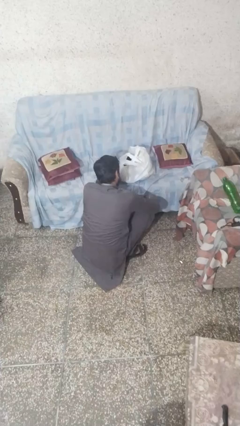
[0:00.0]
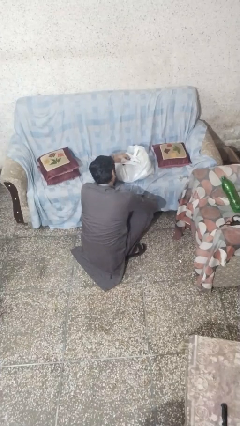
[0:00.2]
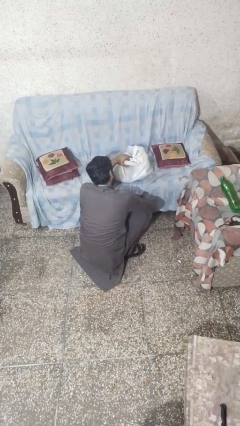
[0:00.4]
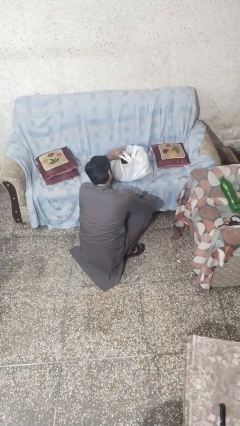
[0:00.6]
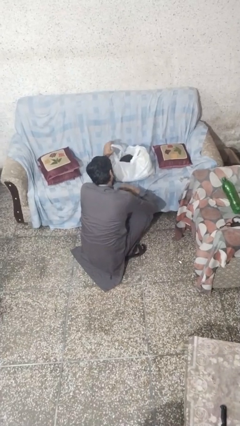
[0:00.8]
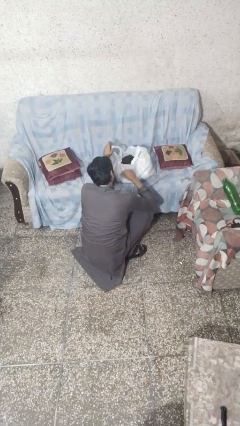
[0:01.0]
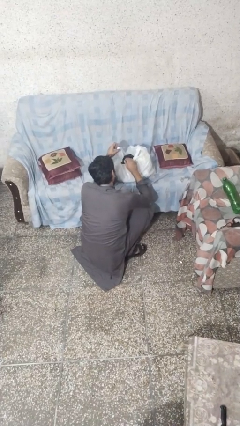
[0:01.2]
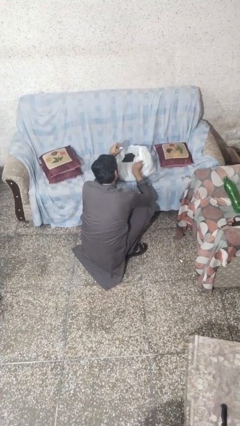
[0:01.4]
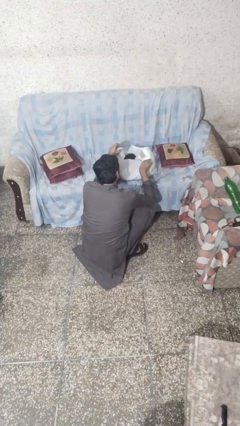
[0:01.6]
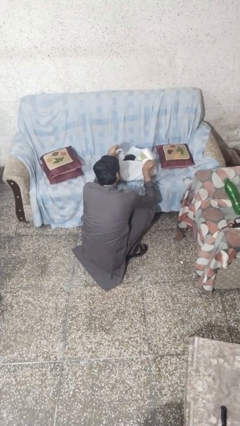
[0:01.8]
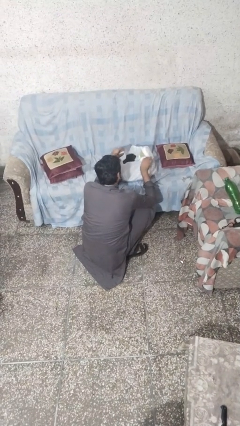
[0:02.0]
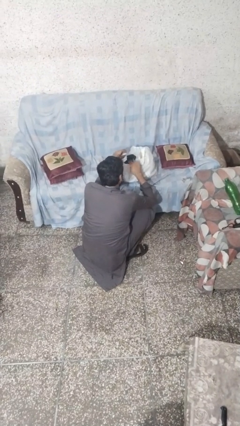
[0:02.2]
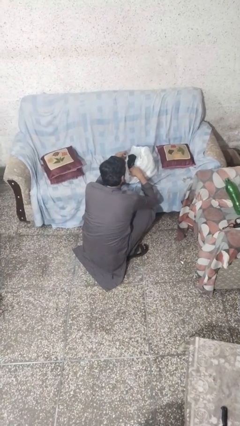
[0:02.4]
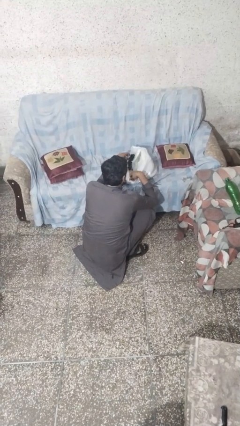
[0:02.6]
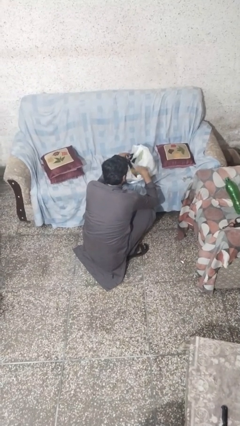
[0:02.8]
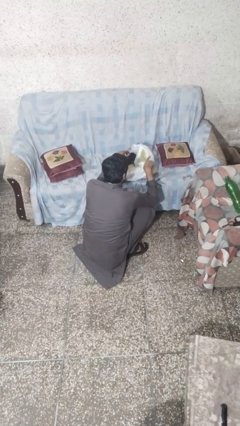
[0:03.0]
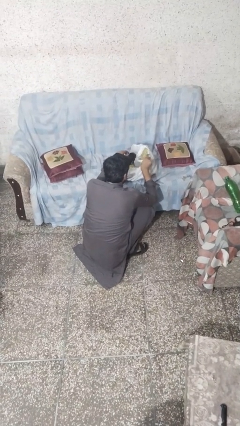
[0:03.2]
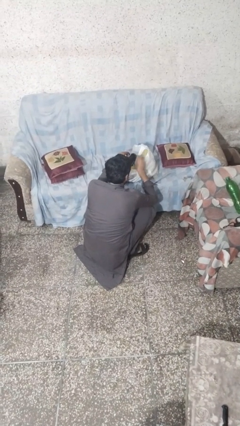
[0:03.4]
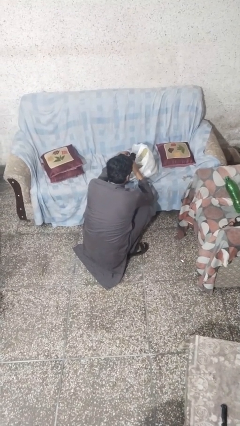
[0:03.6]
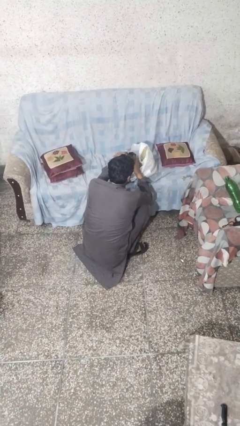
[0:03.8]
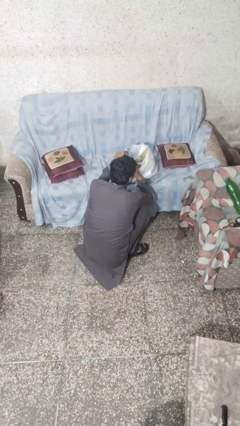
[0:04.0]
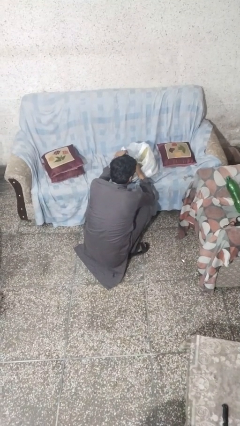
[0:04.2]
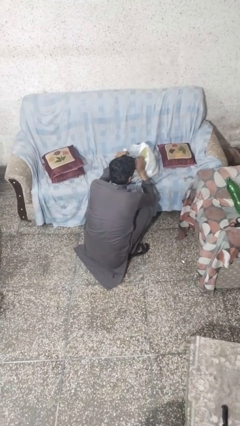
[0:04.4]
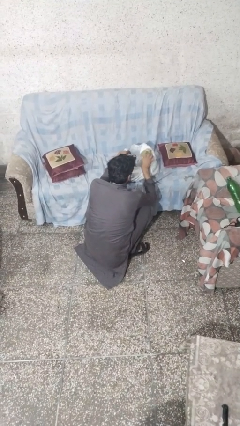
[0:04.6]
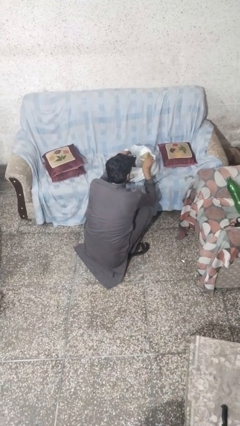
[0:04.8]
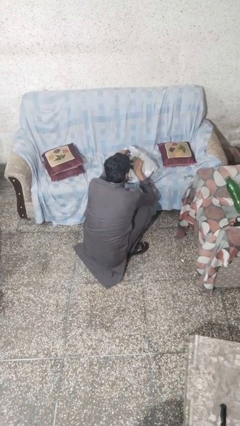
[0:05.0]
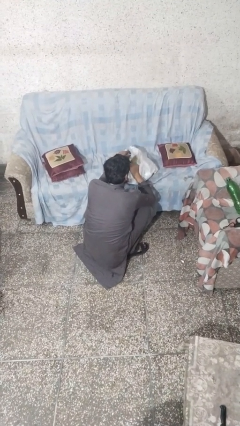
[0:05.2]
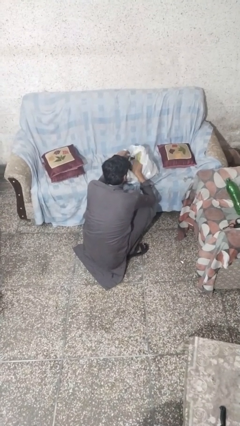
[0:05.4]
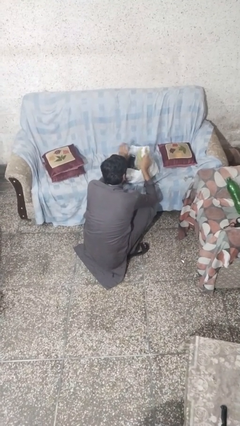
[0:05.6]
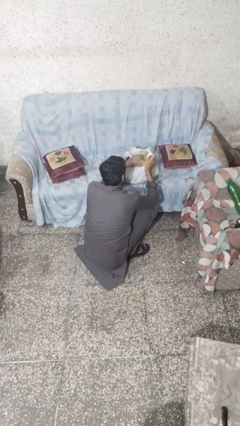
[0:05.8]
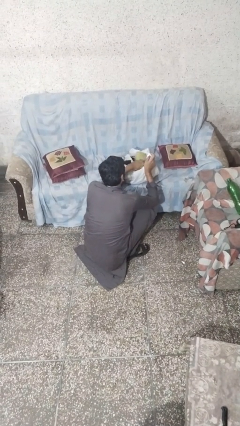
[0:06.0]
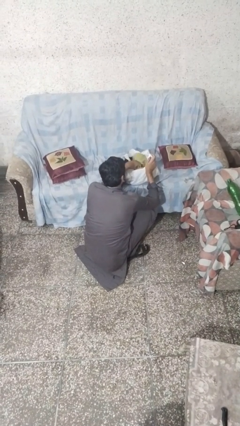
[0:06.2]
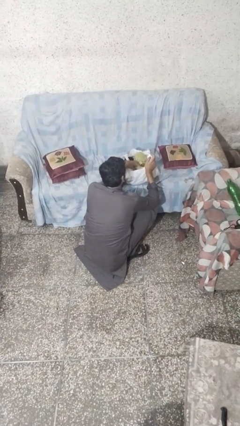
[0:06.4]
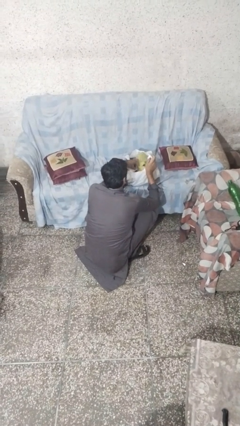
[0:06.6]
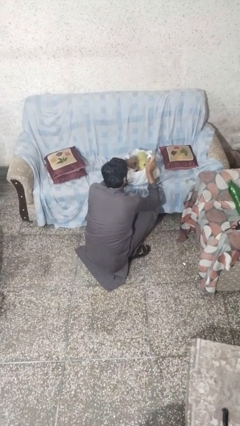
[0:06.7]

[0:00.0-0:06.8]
person searches in bag

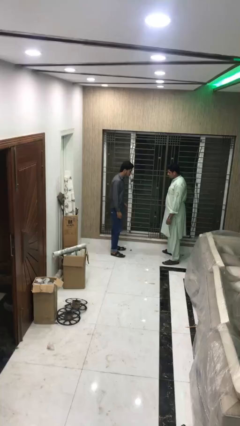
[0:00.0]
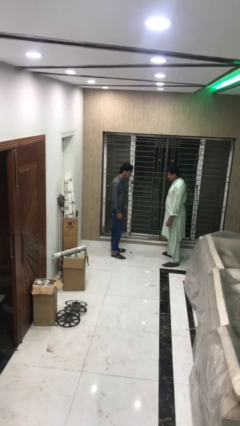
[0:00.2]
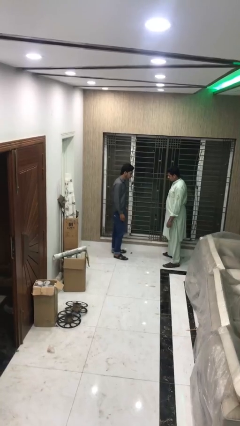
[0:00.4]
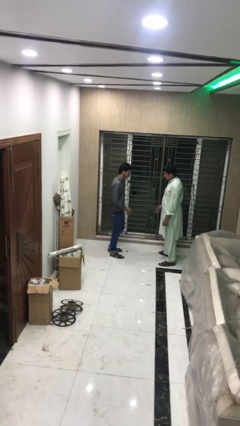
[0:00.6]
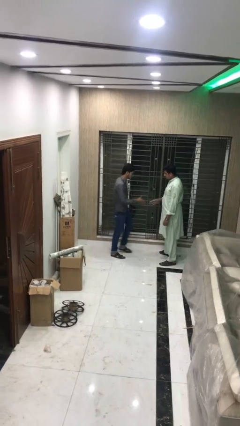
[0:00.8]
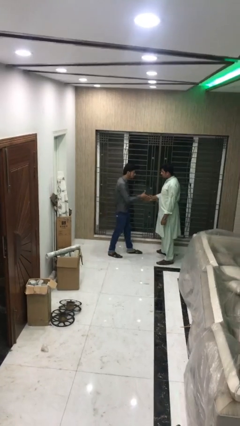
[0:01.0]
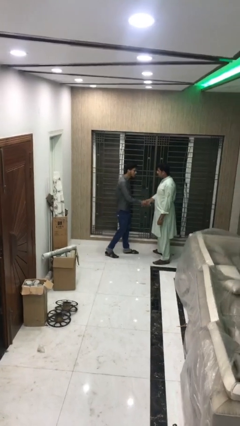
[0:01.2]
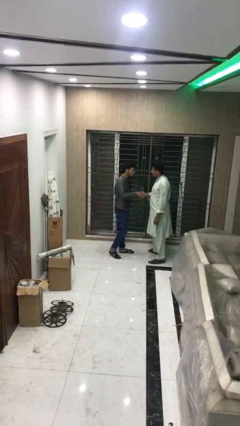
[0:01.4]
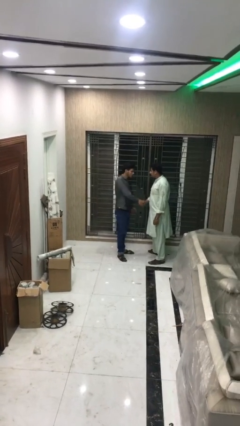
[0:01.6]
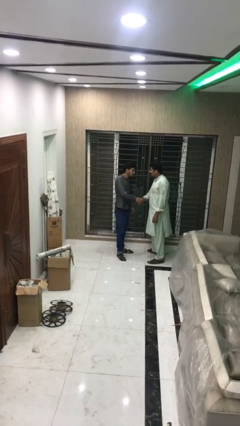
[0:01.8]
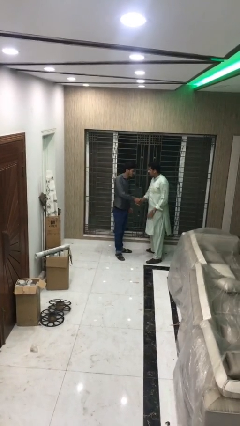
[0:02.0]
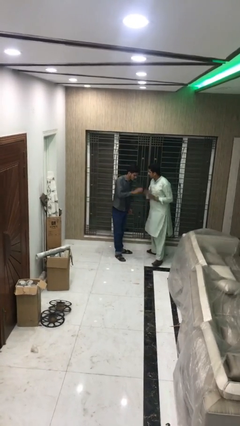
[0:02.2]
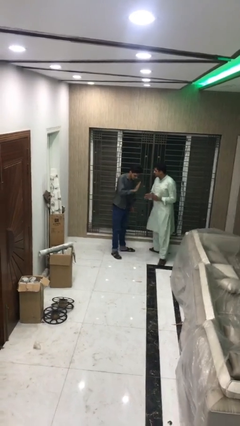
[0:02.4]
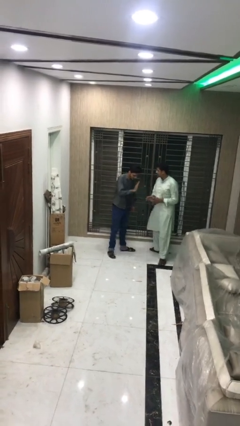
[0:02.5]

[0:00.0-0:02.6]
person shakes hand

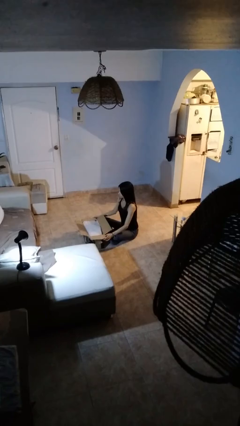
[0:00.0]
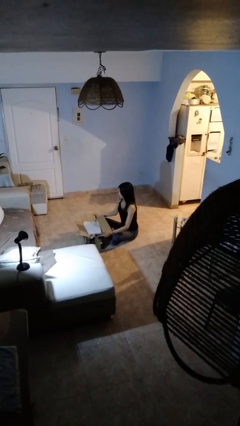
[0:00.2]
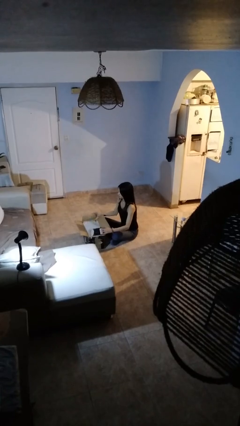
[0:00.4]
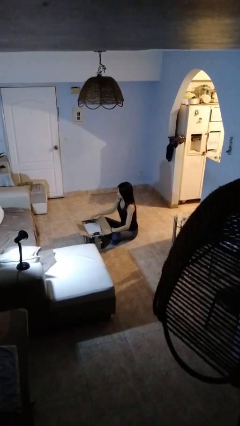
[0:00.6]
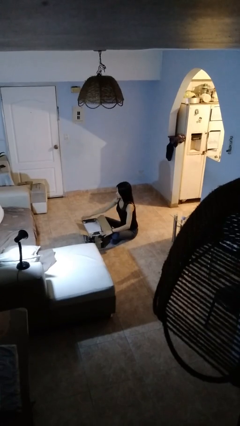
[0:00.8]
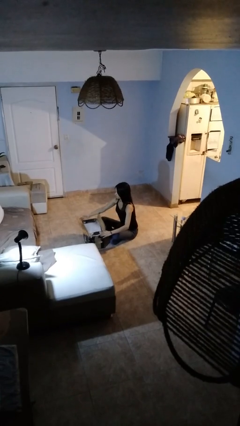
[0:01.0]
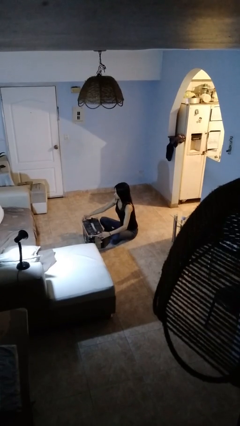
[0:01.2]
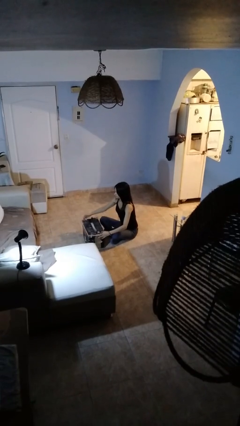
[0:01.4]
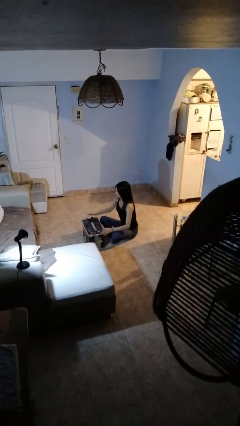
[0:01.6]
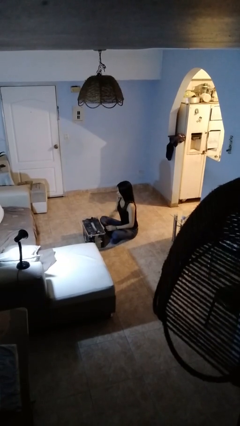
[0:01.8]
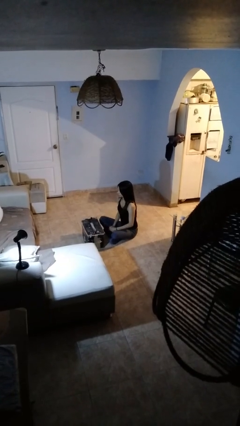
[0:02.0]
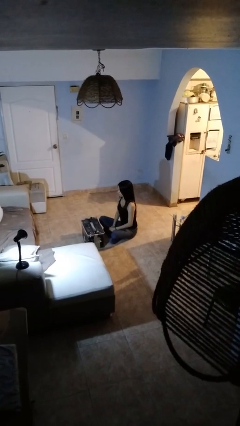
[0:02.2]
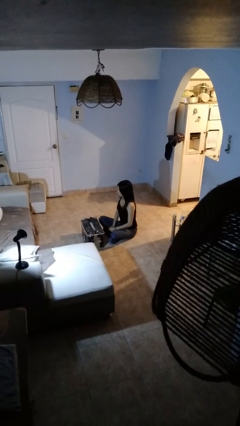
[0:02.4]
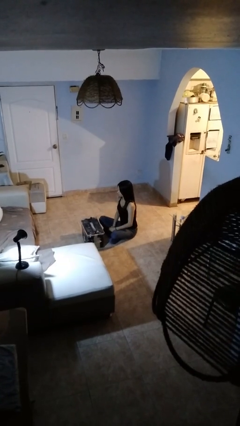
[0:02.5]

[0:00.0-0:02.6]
person closes box

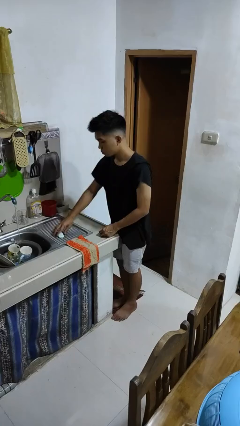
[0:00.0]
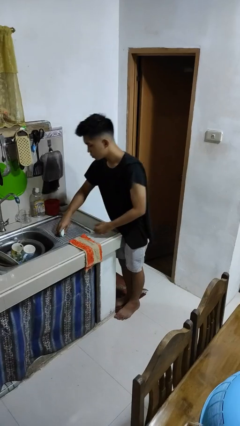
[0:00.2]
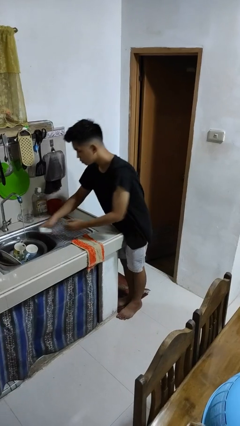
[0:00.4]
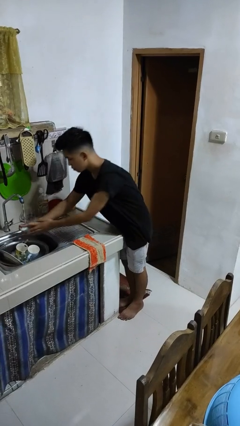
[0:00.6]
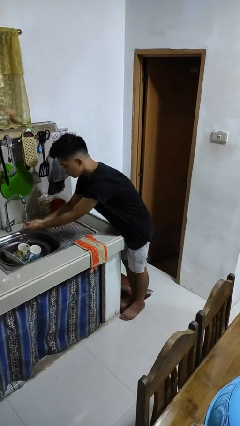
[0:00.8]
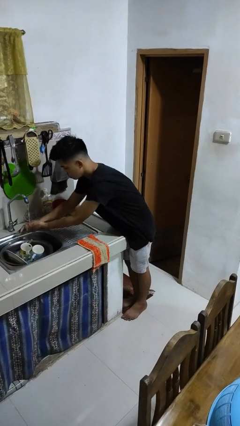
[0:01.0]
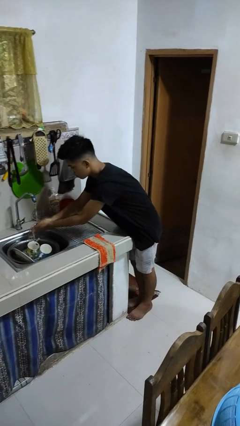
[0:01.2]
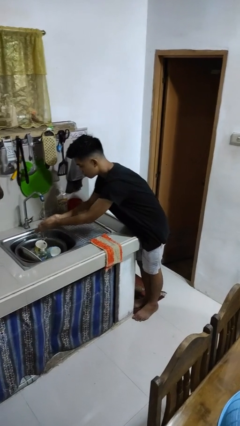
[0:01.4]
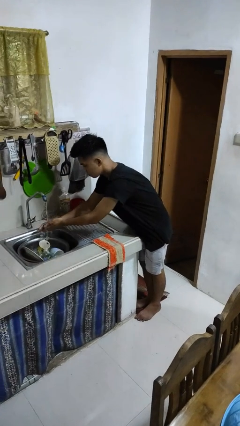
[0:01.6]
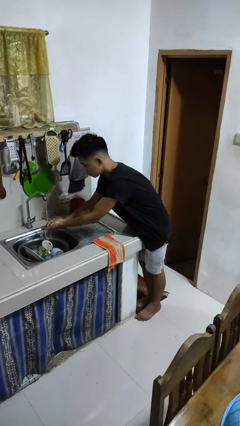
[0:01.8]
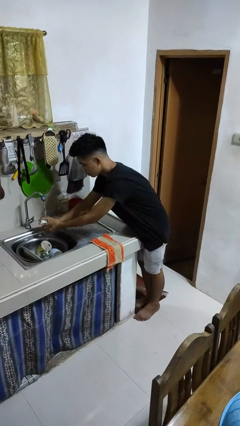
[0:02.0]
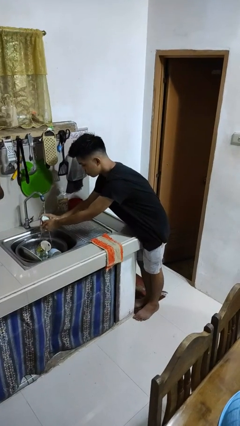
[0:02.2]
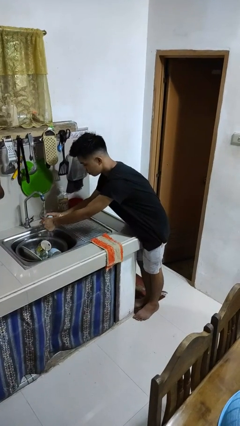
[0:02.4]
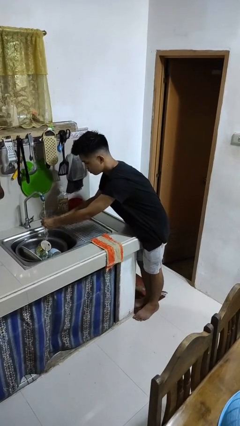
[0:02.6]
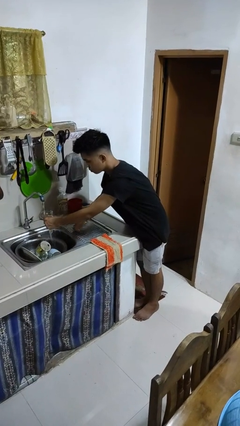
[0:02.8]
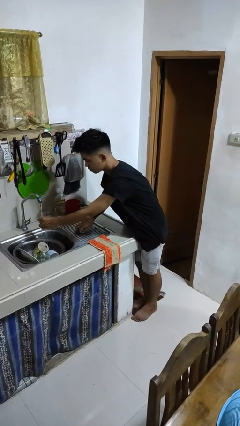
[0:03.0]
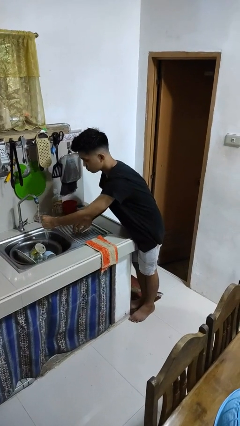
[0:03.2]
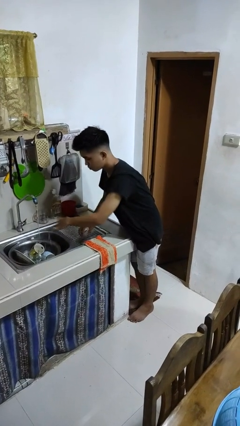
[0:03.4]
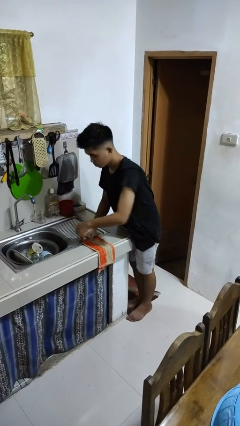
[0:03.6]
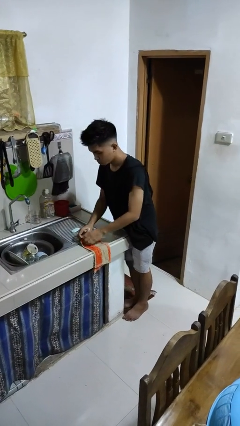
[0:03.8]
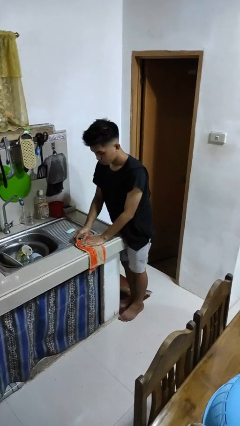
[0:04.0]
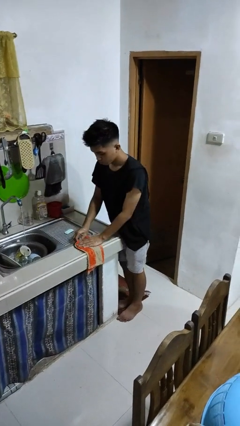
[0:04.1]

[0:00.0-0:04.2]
person washes hands

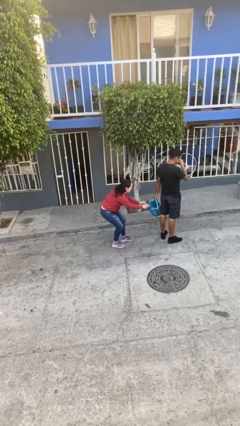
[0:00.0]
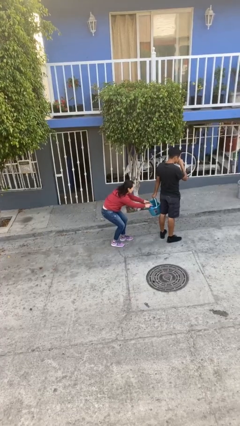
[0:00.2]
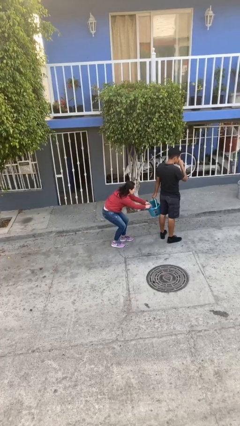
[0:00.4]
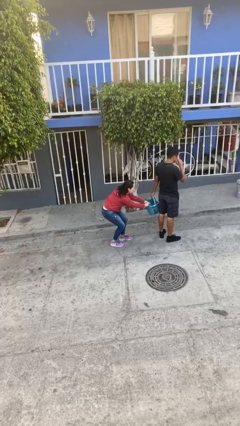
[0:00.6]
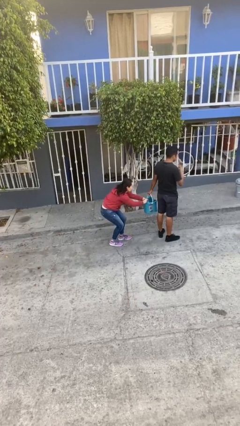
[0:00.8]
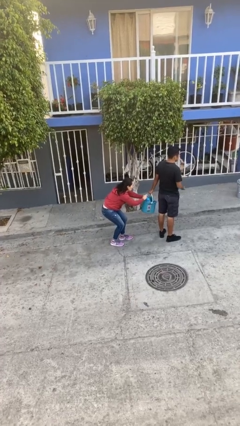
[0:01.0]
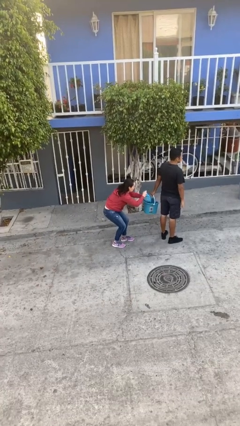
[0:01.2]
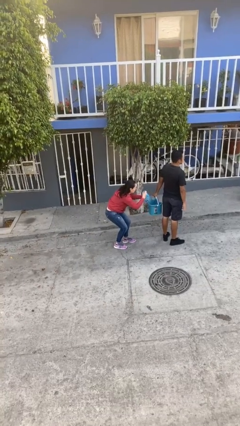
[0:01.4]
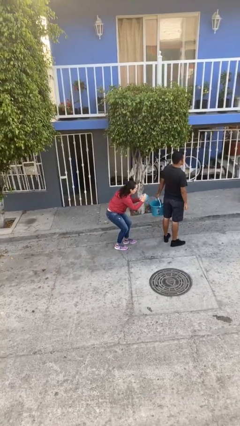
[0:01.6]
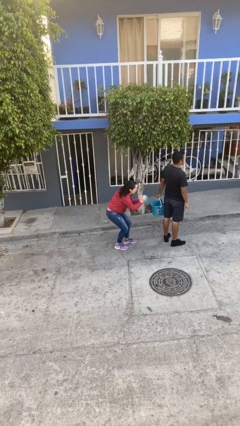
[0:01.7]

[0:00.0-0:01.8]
person steals object from person
